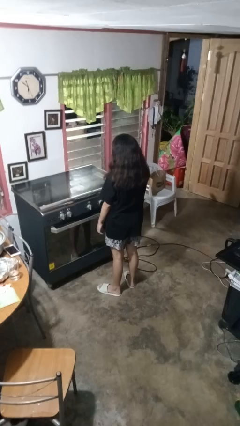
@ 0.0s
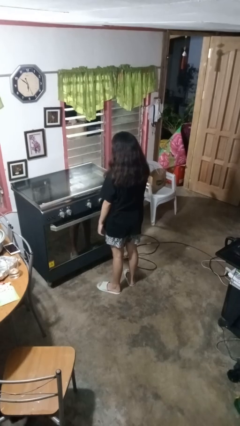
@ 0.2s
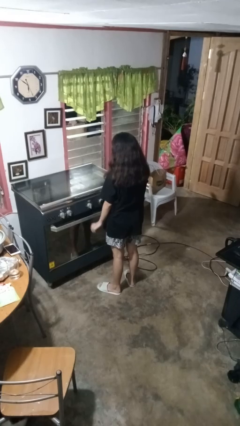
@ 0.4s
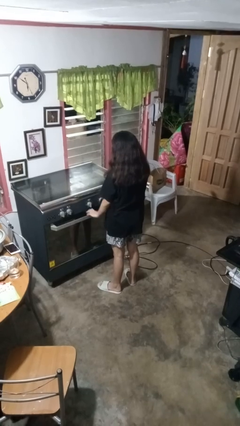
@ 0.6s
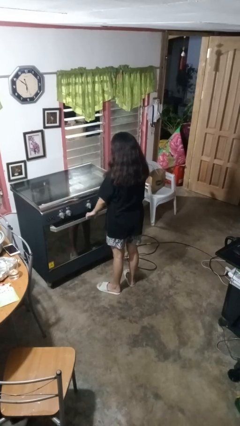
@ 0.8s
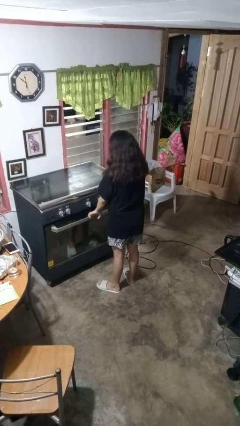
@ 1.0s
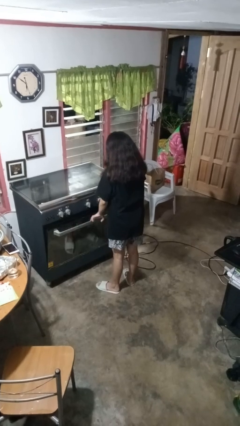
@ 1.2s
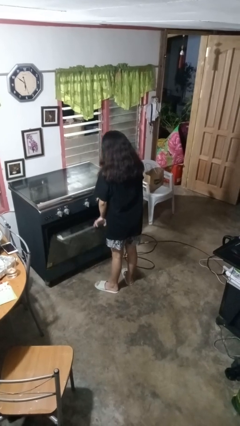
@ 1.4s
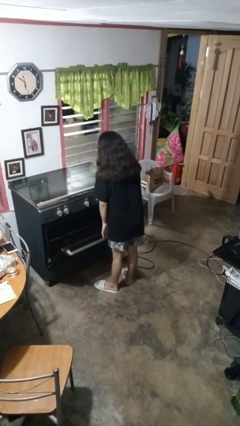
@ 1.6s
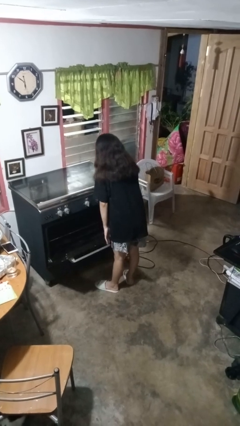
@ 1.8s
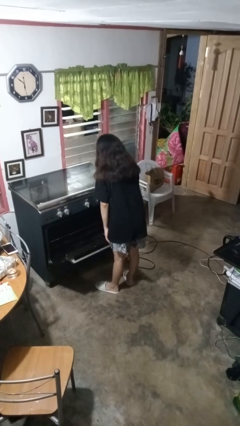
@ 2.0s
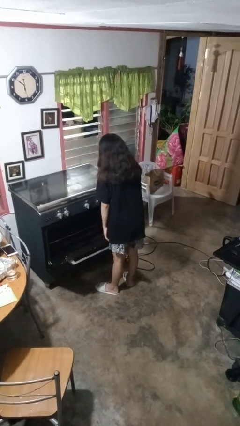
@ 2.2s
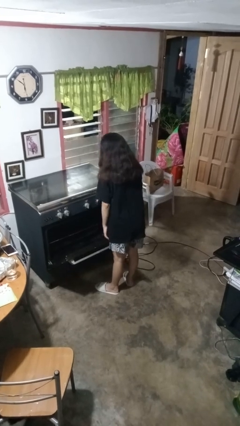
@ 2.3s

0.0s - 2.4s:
person opens oven door

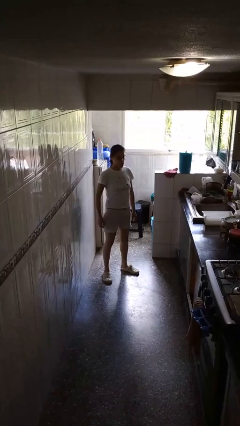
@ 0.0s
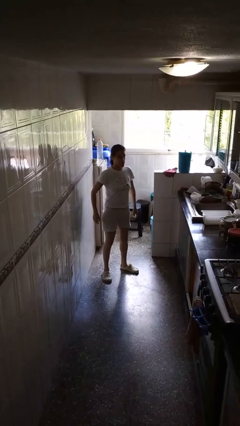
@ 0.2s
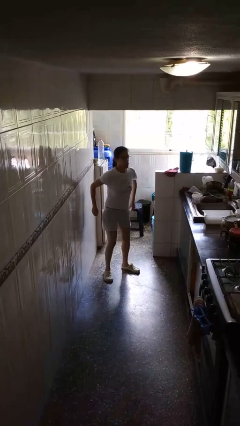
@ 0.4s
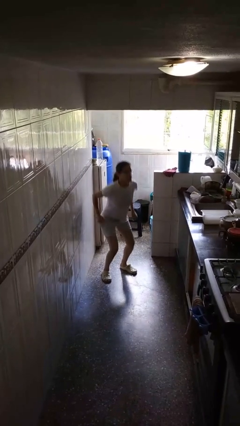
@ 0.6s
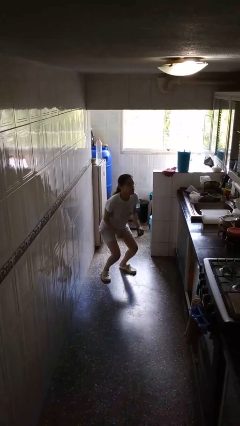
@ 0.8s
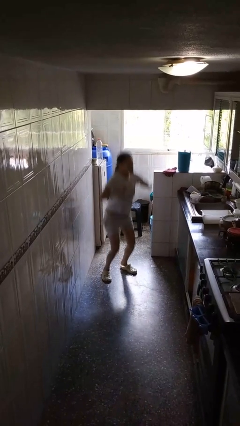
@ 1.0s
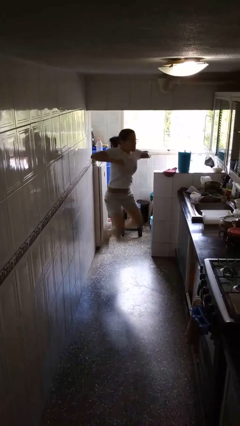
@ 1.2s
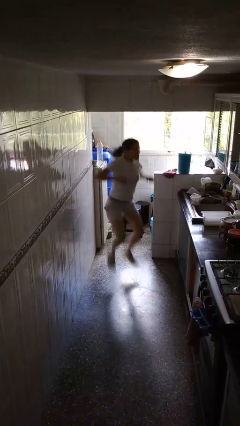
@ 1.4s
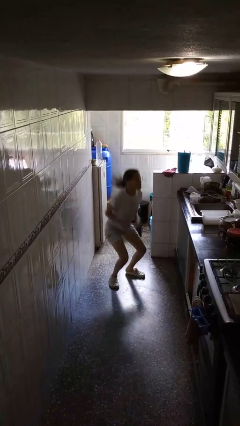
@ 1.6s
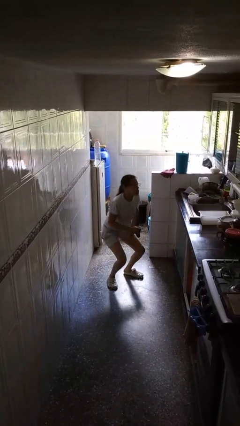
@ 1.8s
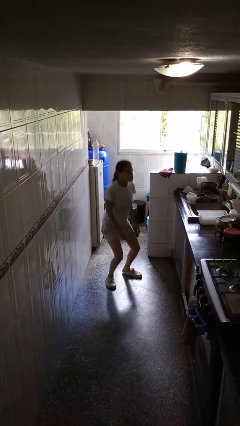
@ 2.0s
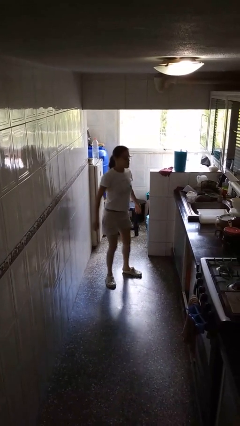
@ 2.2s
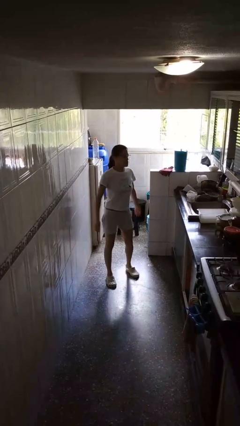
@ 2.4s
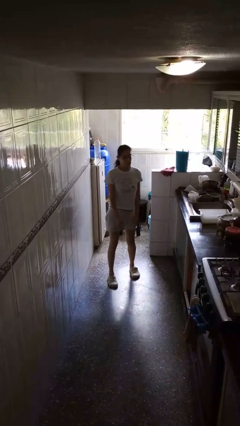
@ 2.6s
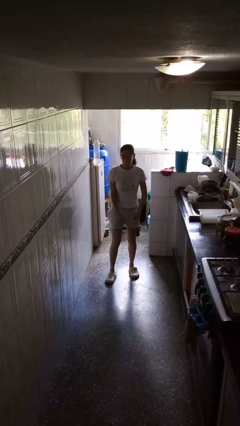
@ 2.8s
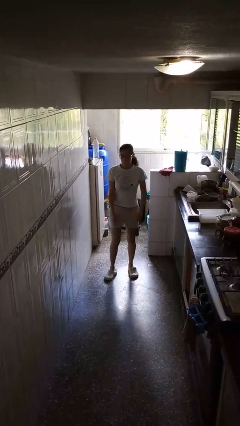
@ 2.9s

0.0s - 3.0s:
person jumps

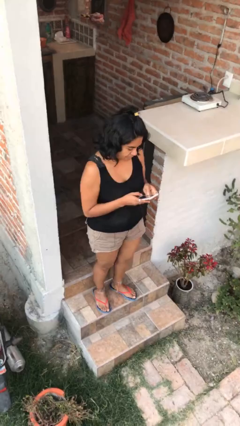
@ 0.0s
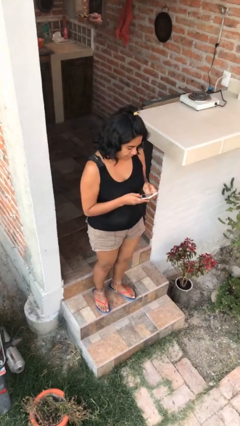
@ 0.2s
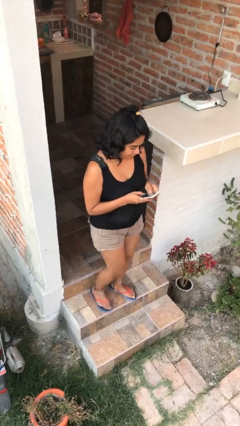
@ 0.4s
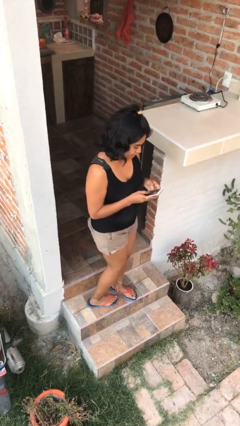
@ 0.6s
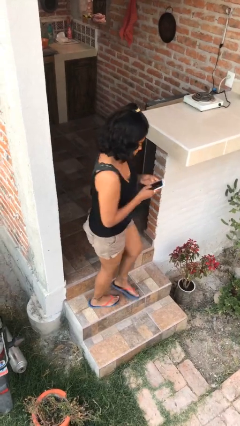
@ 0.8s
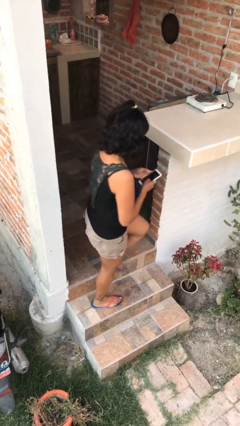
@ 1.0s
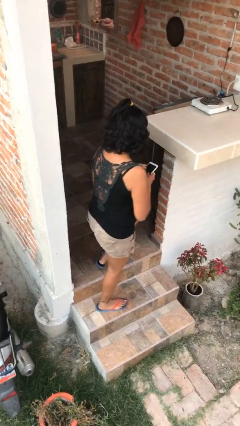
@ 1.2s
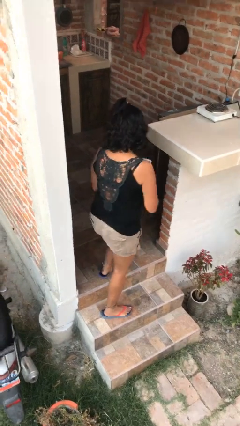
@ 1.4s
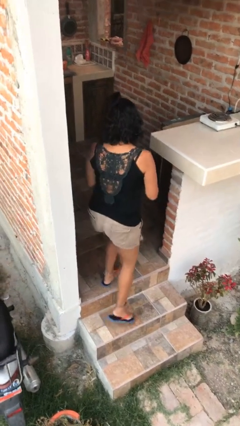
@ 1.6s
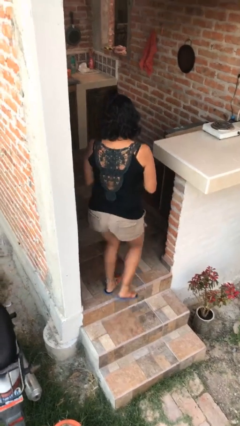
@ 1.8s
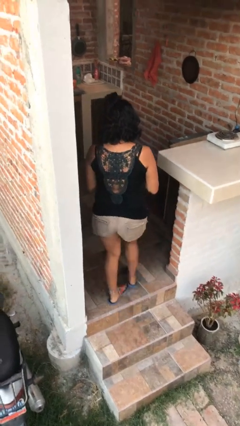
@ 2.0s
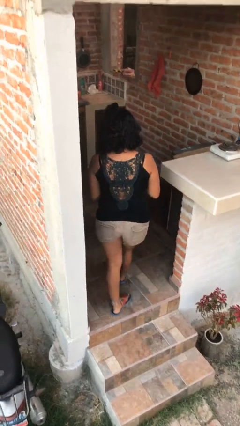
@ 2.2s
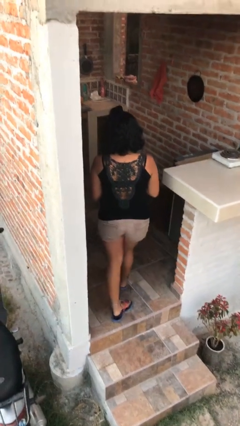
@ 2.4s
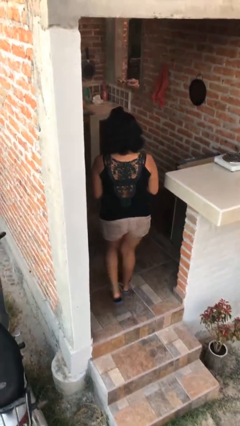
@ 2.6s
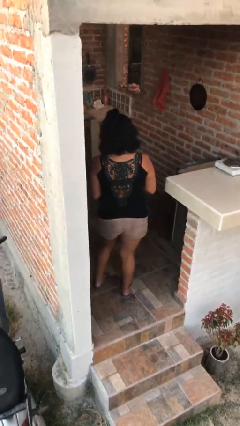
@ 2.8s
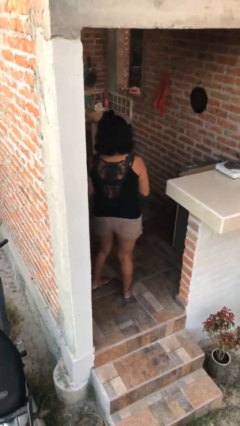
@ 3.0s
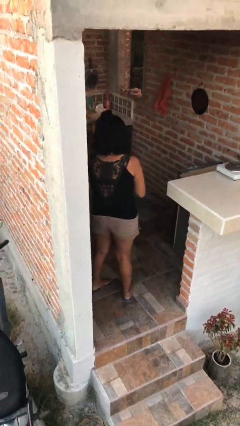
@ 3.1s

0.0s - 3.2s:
person exits scene through structure

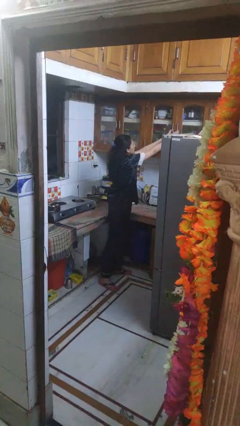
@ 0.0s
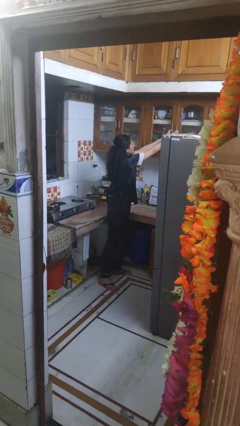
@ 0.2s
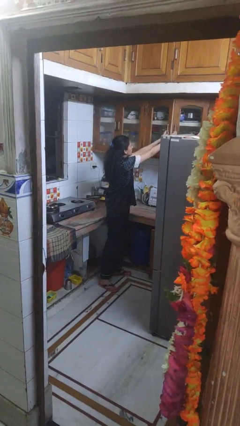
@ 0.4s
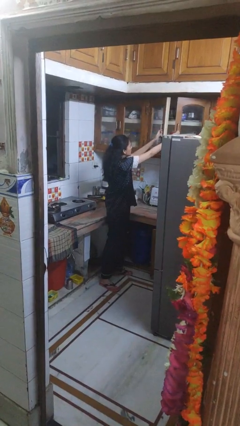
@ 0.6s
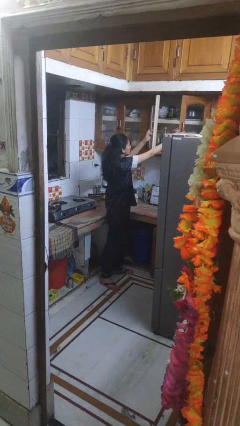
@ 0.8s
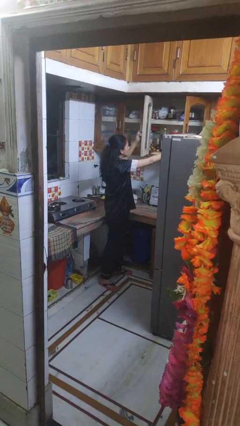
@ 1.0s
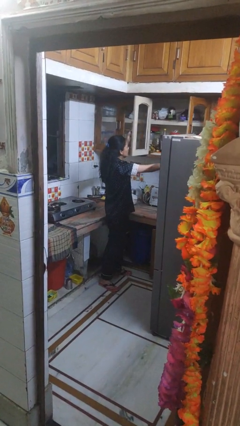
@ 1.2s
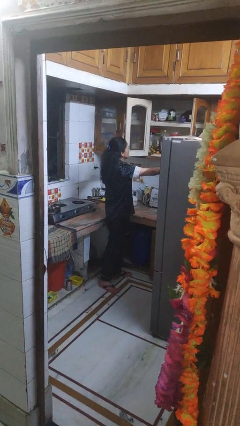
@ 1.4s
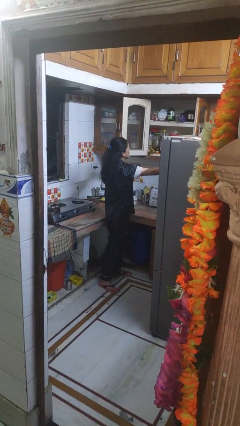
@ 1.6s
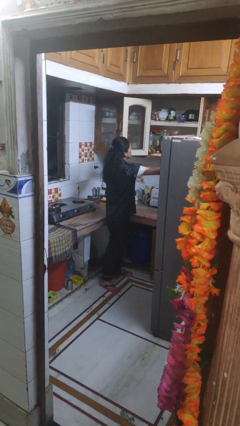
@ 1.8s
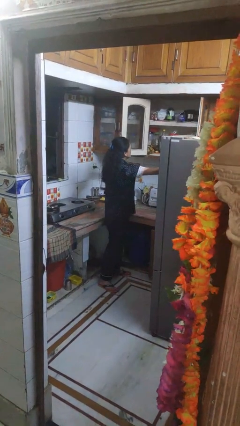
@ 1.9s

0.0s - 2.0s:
person opens cabinet

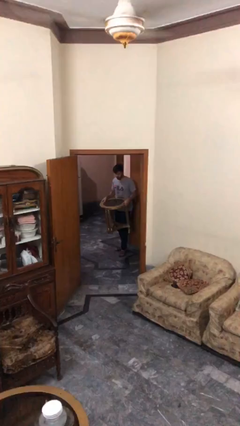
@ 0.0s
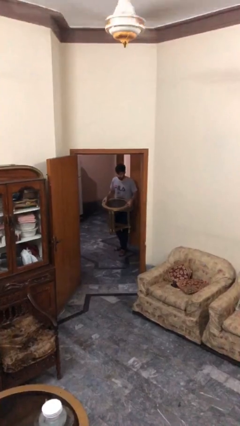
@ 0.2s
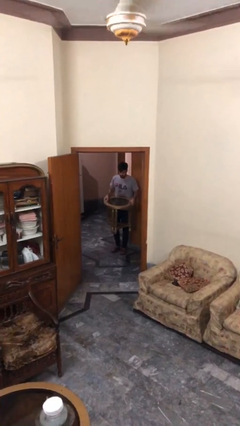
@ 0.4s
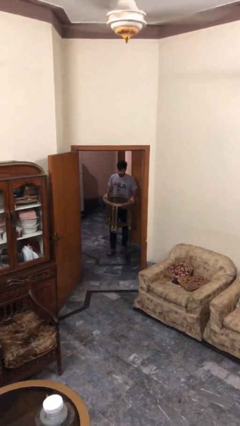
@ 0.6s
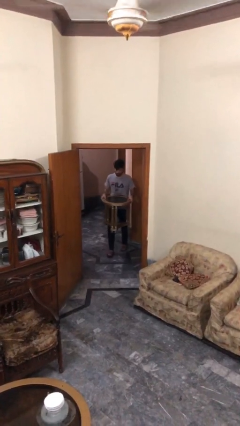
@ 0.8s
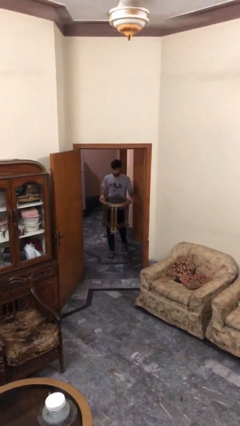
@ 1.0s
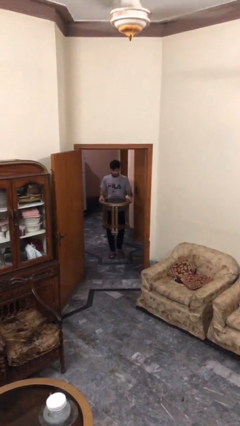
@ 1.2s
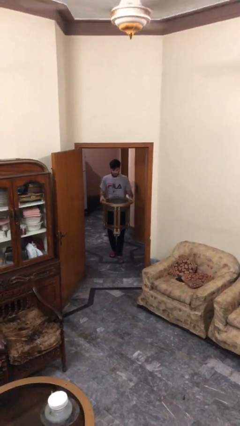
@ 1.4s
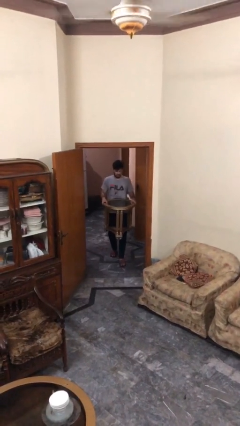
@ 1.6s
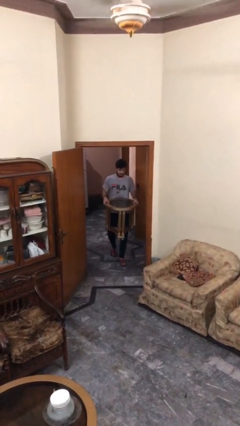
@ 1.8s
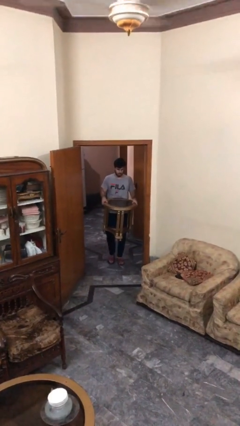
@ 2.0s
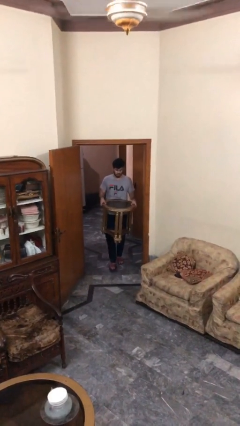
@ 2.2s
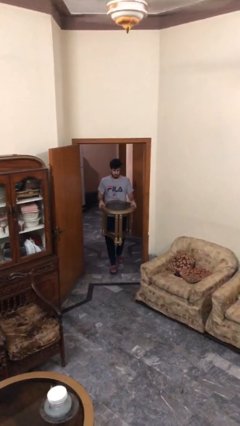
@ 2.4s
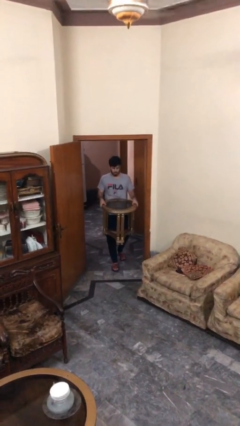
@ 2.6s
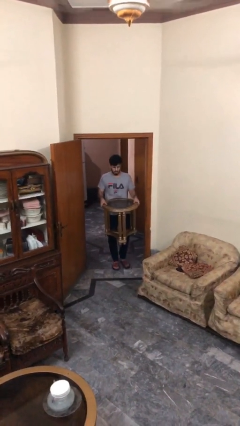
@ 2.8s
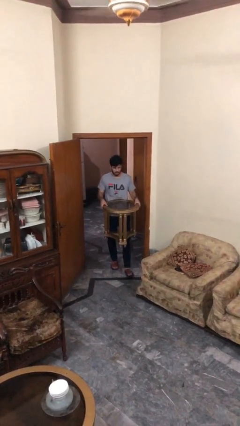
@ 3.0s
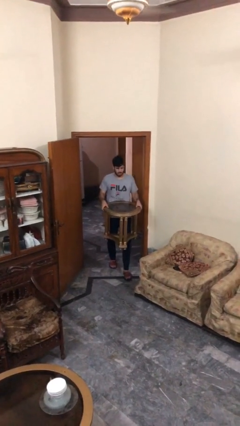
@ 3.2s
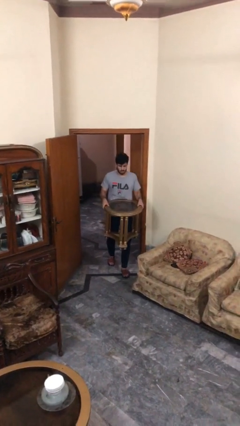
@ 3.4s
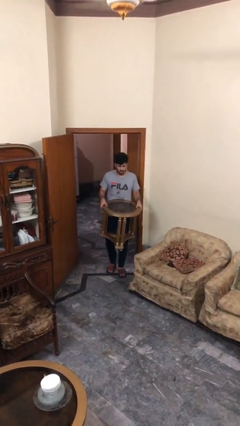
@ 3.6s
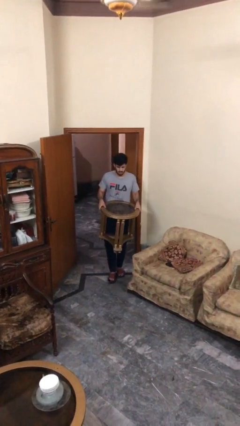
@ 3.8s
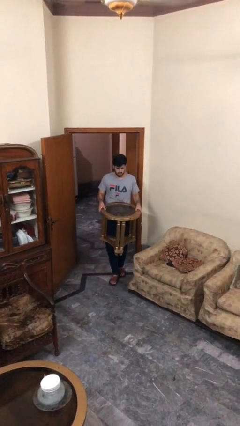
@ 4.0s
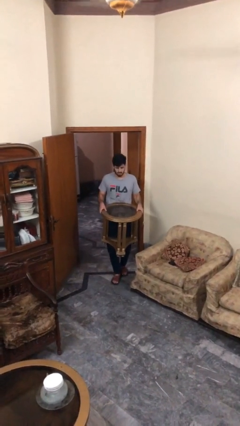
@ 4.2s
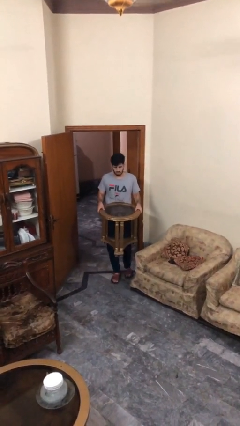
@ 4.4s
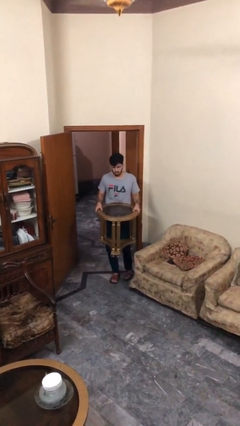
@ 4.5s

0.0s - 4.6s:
person carries furniture

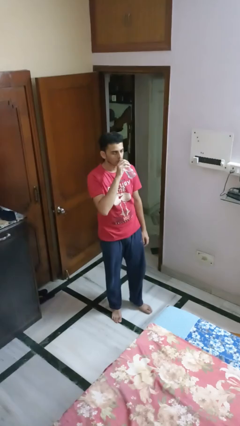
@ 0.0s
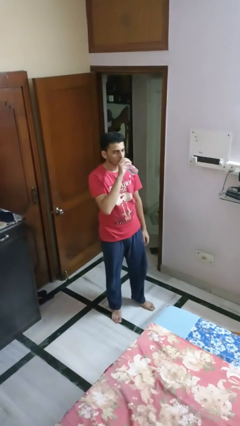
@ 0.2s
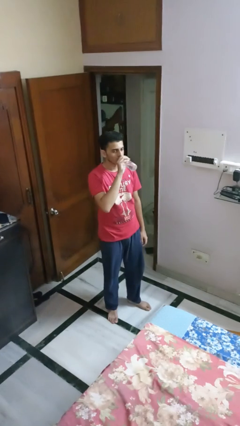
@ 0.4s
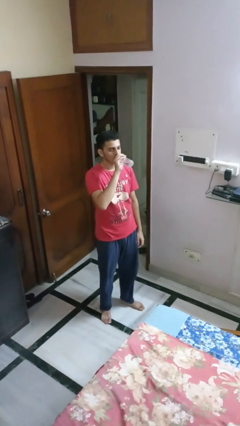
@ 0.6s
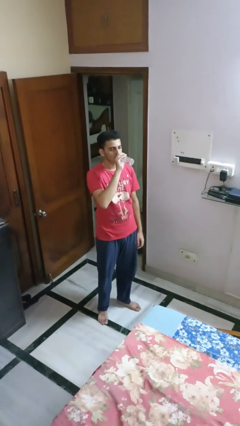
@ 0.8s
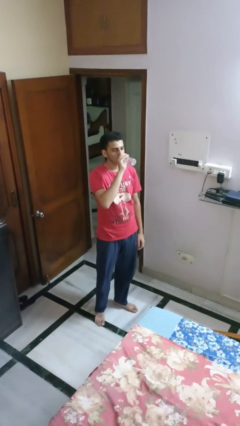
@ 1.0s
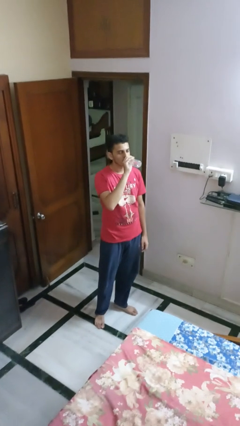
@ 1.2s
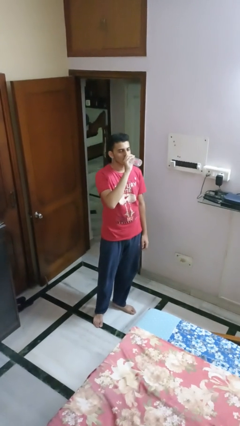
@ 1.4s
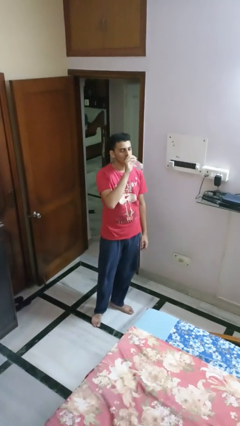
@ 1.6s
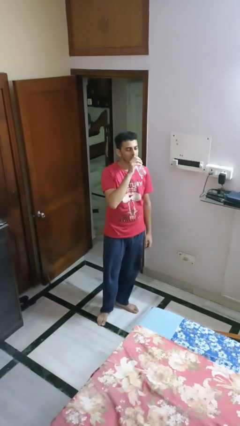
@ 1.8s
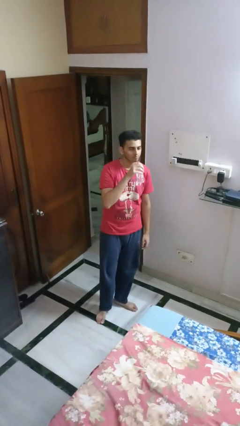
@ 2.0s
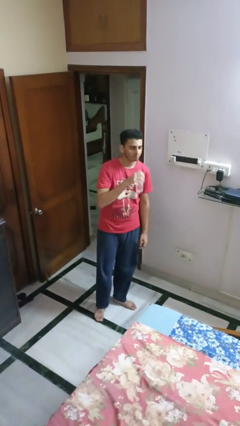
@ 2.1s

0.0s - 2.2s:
person drinks from bottle
